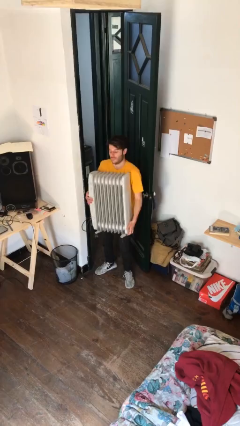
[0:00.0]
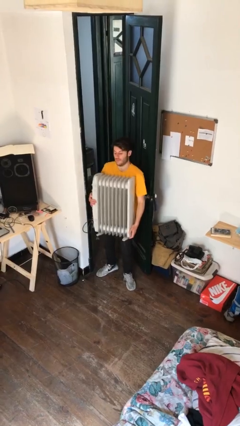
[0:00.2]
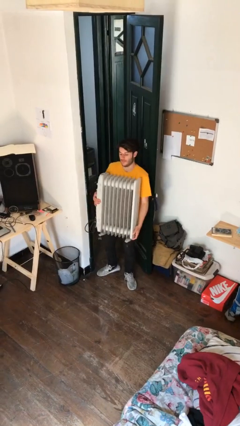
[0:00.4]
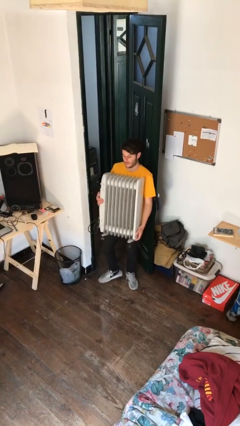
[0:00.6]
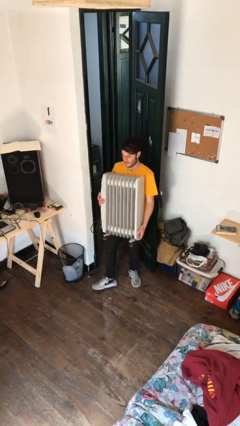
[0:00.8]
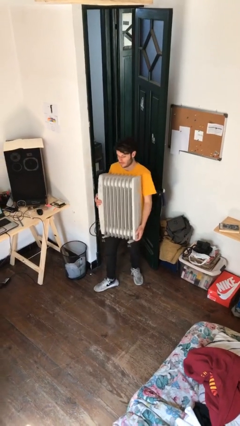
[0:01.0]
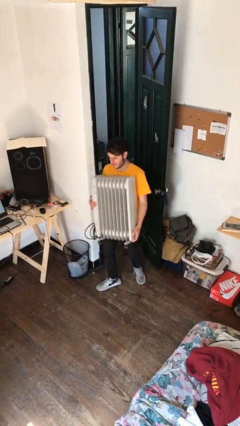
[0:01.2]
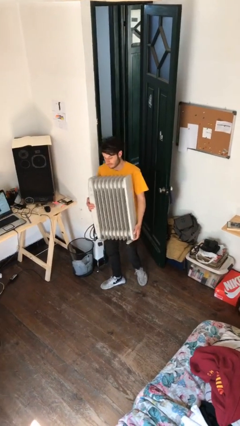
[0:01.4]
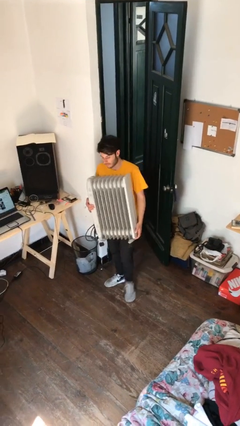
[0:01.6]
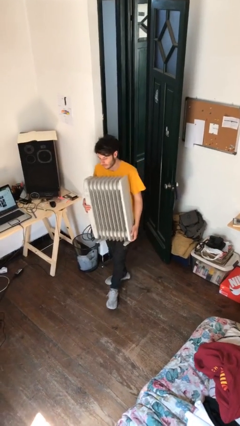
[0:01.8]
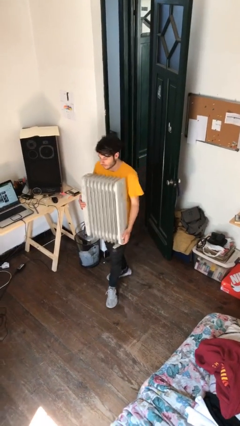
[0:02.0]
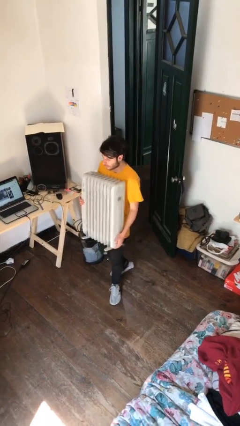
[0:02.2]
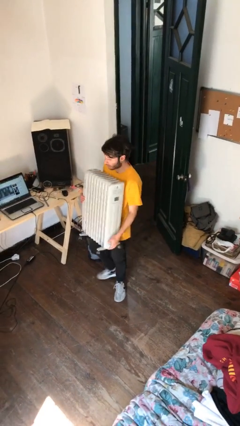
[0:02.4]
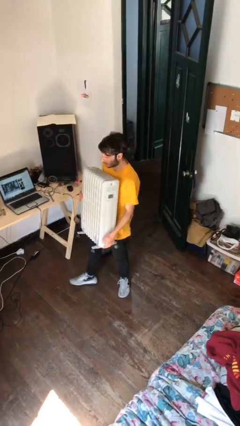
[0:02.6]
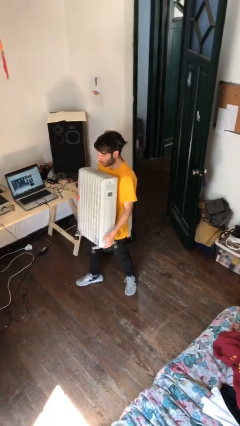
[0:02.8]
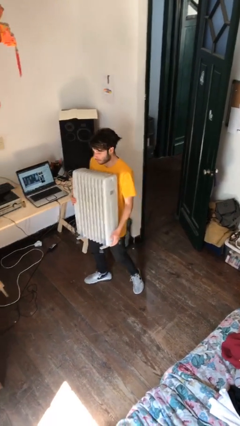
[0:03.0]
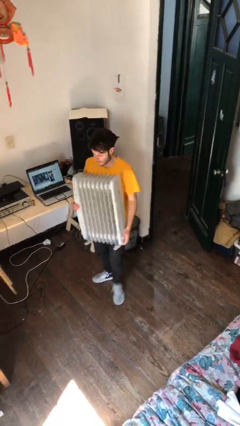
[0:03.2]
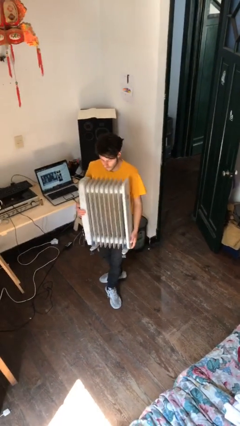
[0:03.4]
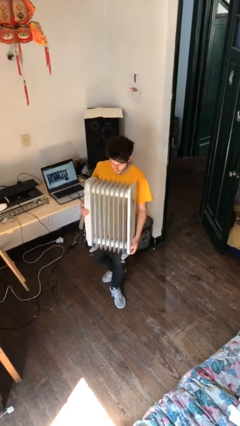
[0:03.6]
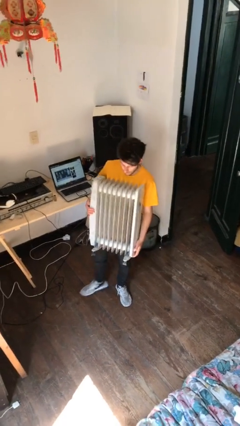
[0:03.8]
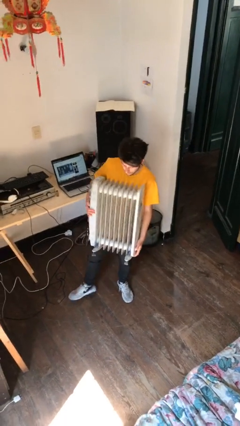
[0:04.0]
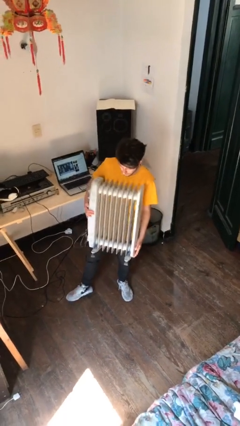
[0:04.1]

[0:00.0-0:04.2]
person carries heavy object

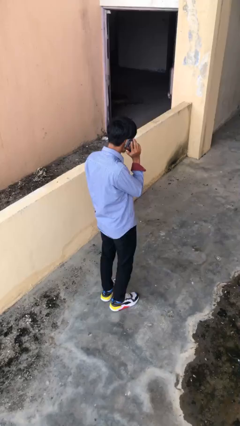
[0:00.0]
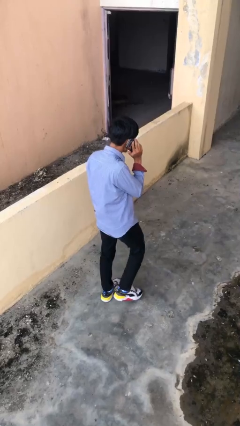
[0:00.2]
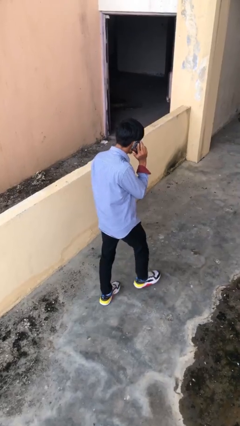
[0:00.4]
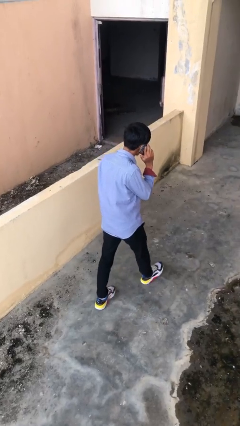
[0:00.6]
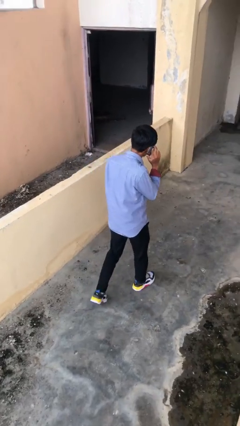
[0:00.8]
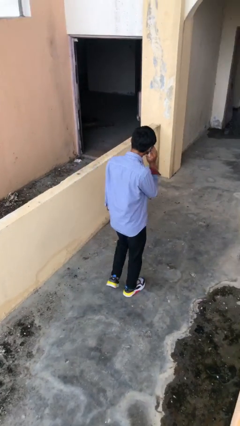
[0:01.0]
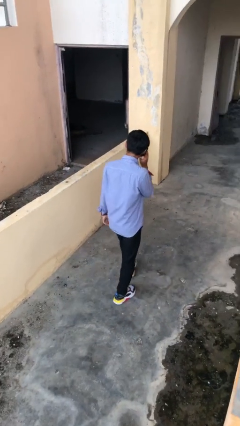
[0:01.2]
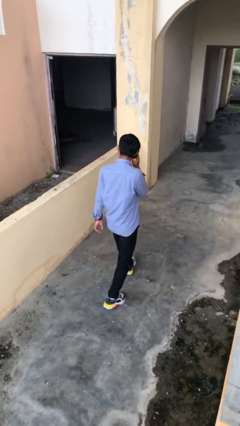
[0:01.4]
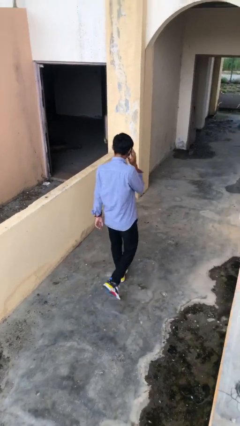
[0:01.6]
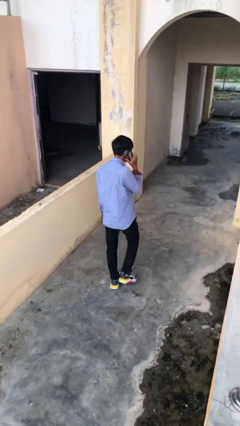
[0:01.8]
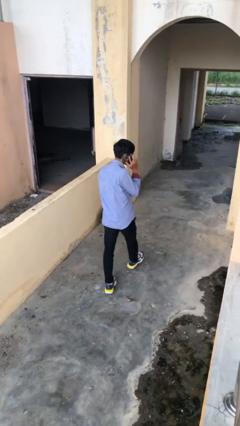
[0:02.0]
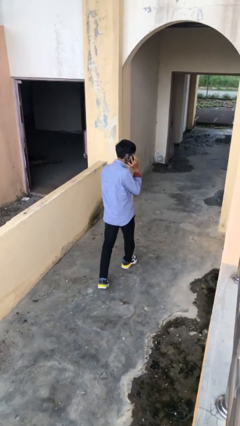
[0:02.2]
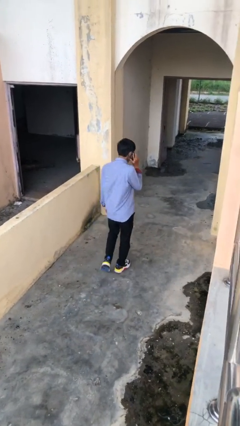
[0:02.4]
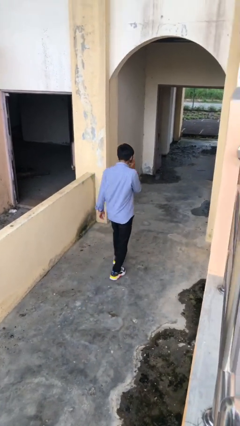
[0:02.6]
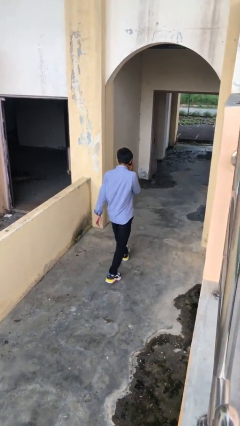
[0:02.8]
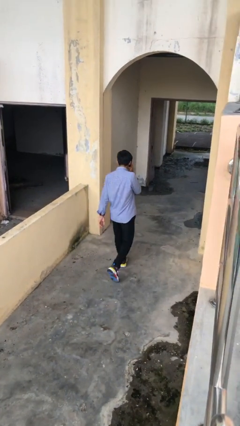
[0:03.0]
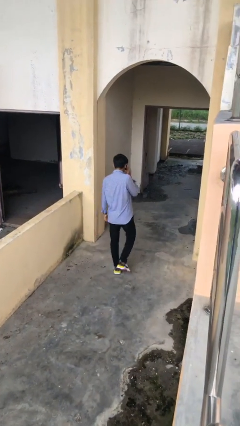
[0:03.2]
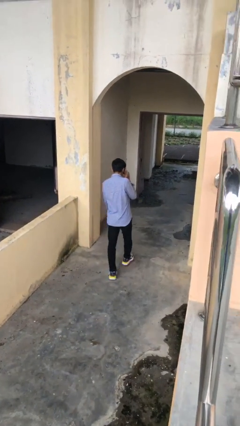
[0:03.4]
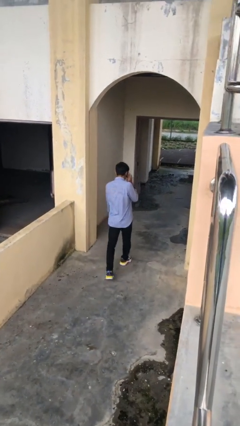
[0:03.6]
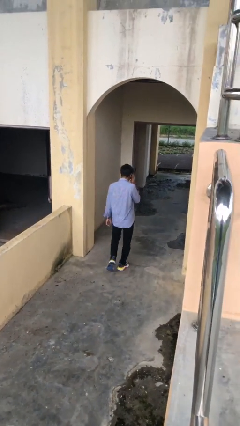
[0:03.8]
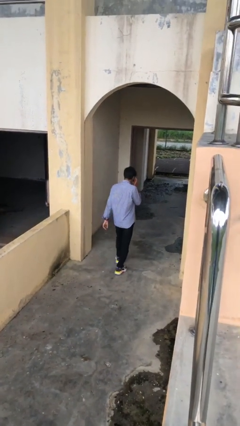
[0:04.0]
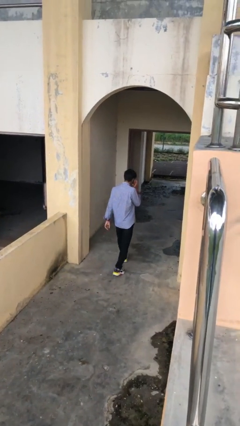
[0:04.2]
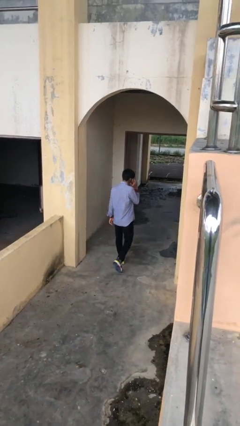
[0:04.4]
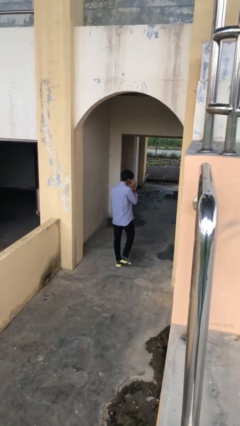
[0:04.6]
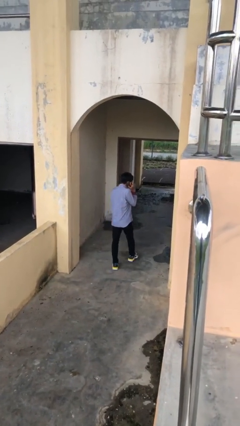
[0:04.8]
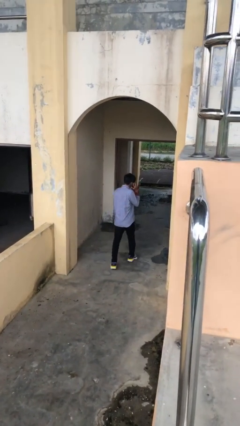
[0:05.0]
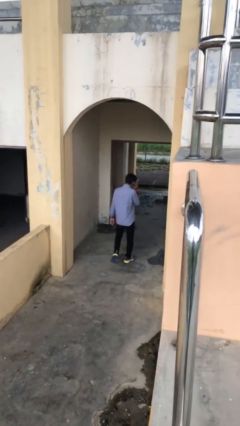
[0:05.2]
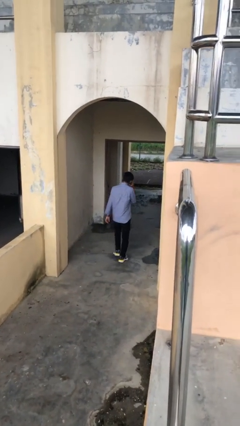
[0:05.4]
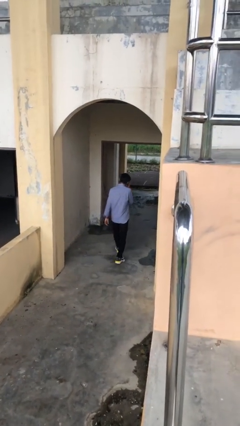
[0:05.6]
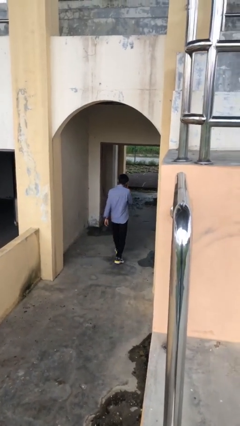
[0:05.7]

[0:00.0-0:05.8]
person exits scene through structure

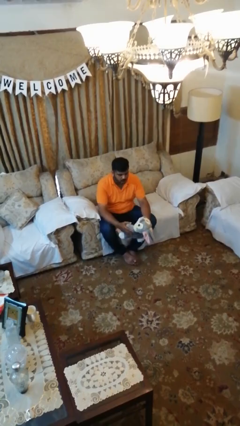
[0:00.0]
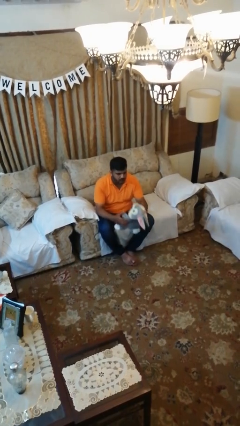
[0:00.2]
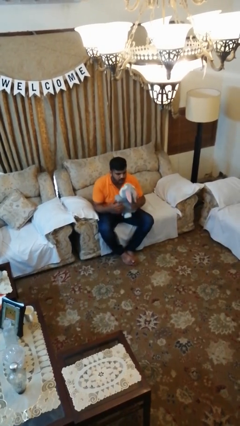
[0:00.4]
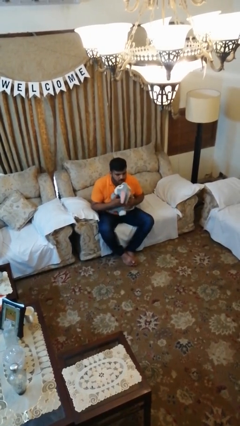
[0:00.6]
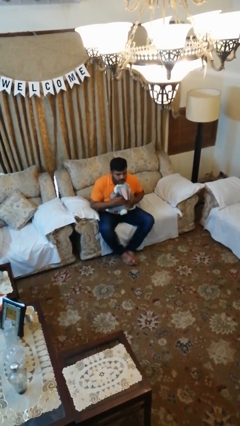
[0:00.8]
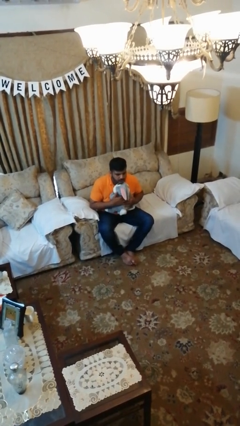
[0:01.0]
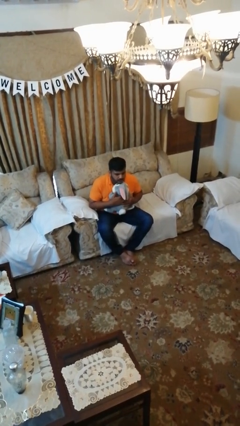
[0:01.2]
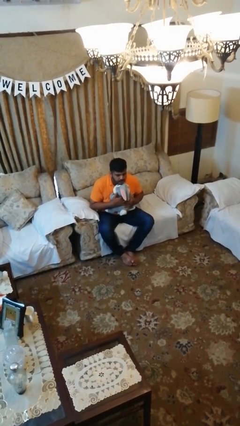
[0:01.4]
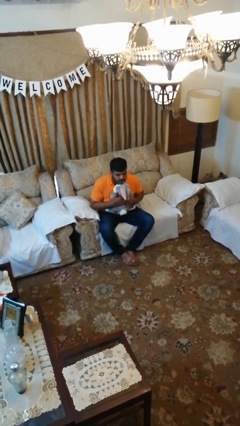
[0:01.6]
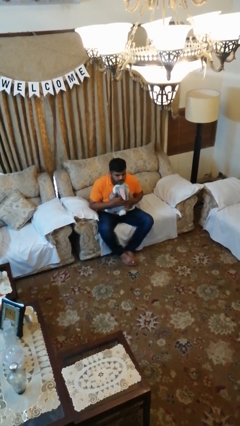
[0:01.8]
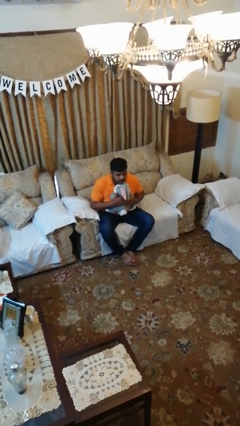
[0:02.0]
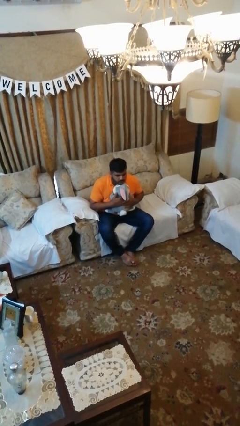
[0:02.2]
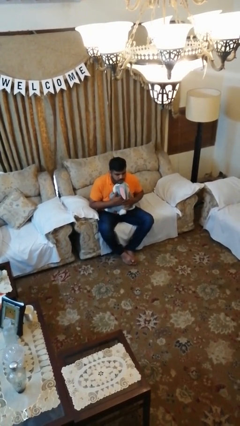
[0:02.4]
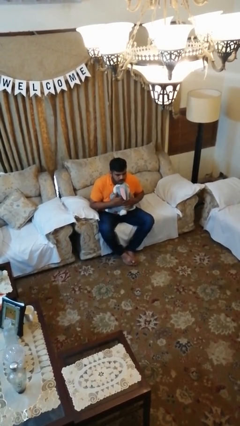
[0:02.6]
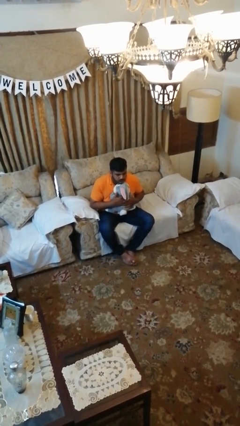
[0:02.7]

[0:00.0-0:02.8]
person hugs stuffed animal

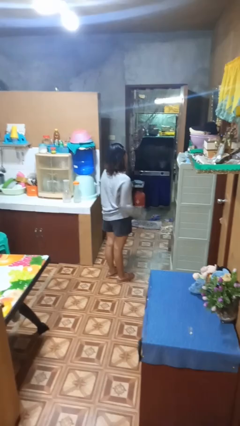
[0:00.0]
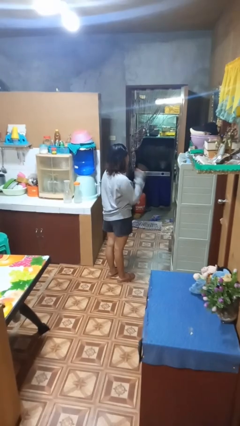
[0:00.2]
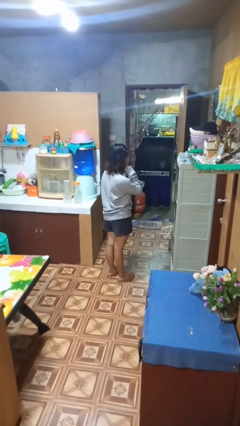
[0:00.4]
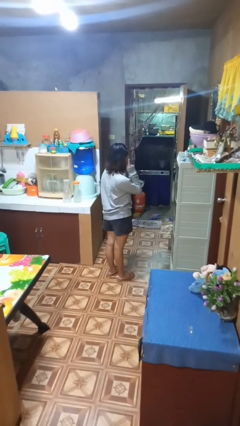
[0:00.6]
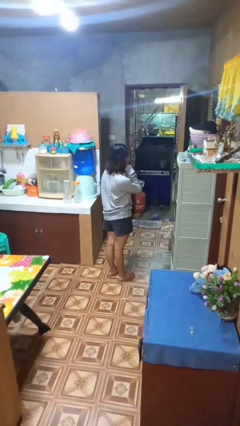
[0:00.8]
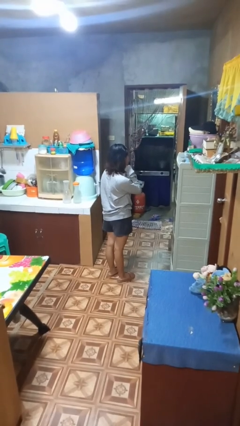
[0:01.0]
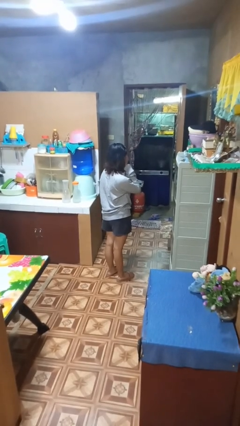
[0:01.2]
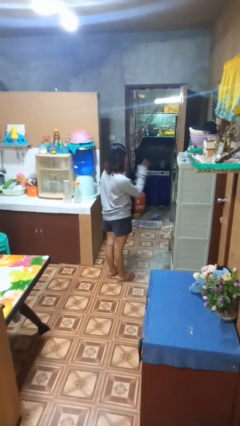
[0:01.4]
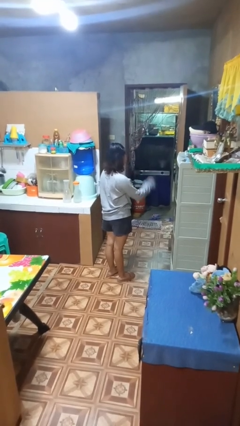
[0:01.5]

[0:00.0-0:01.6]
person gestures listen closely

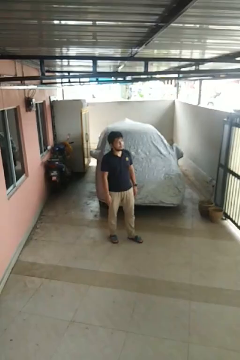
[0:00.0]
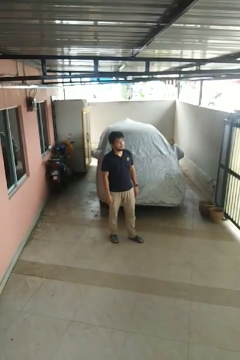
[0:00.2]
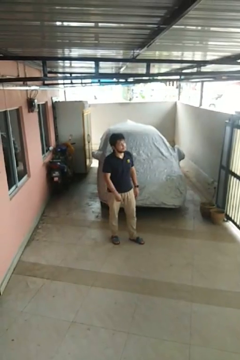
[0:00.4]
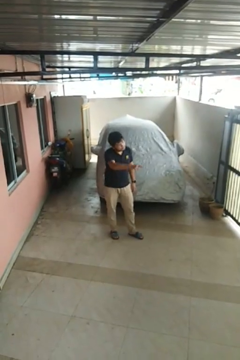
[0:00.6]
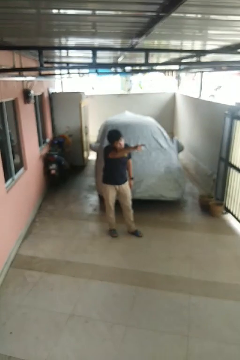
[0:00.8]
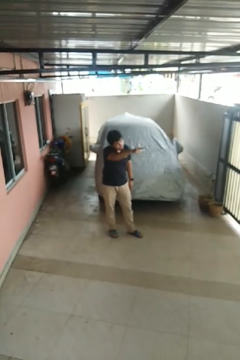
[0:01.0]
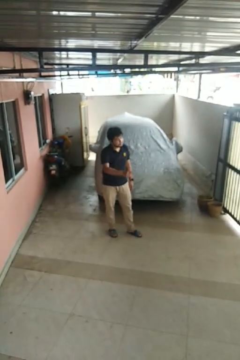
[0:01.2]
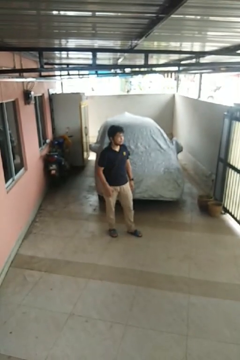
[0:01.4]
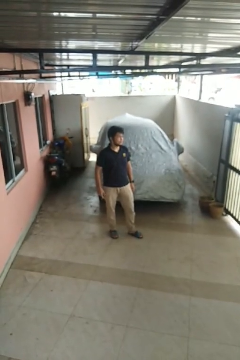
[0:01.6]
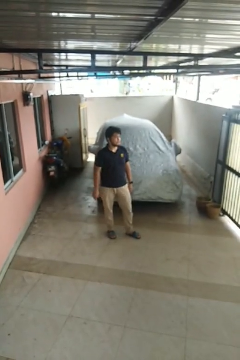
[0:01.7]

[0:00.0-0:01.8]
person points at person

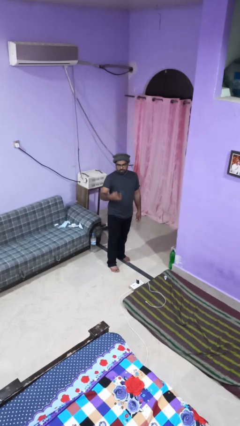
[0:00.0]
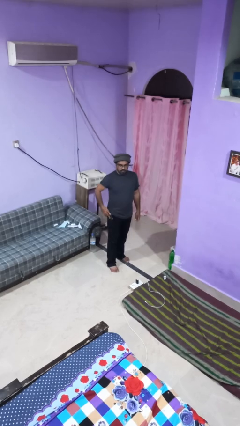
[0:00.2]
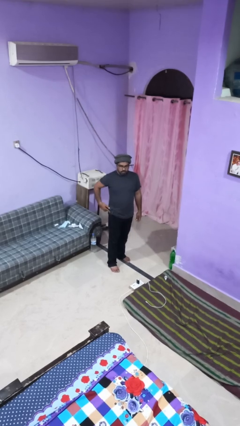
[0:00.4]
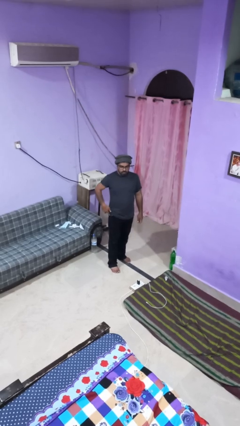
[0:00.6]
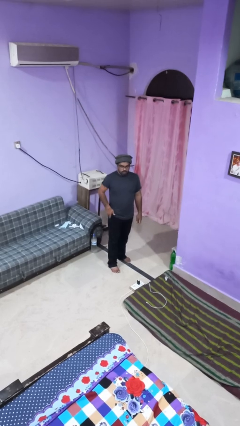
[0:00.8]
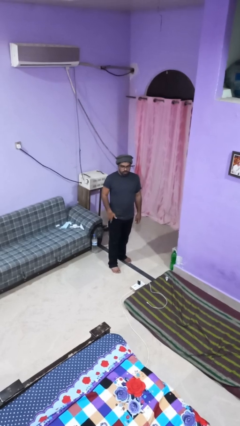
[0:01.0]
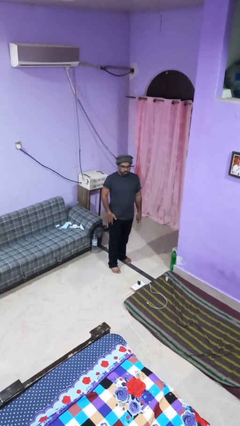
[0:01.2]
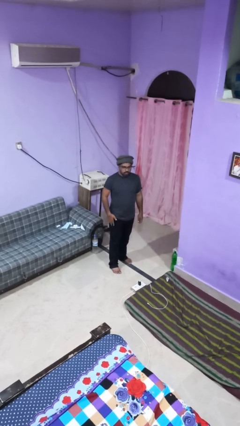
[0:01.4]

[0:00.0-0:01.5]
person puts phone into pocket

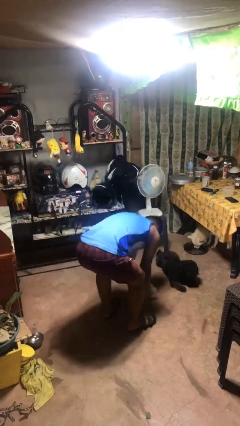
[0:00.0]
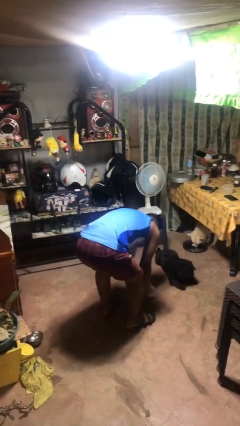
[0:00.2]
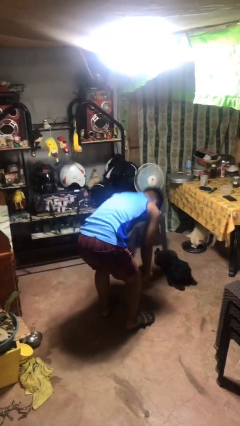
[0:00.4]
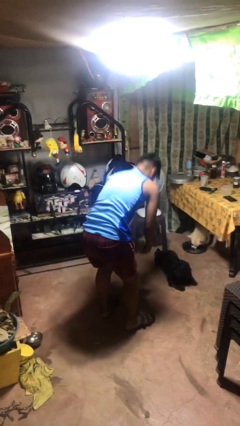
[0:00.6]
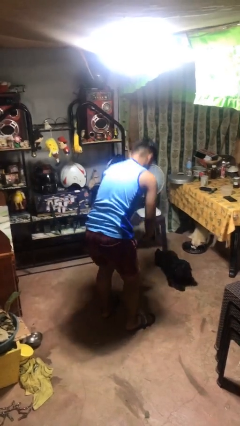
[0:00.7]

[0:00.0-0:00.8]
person catches dropped object
